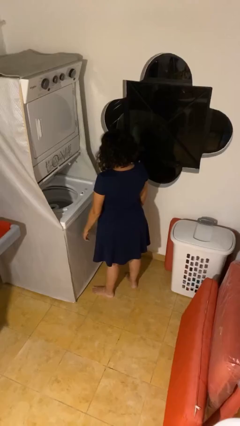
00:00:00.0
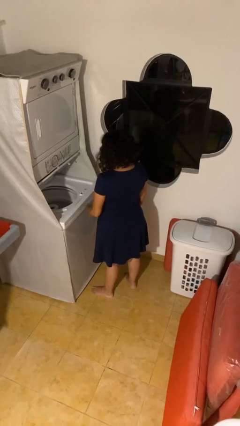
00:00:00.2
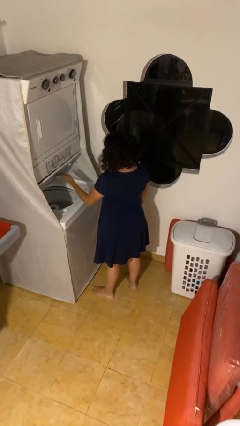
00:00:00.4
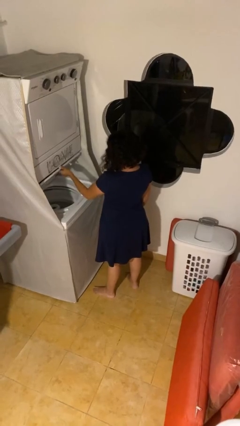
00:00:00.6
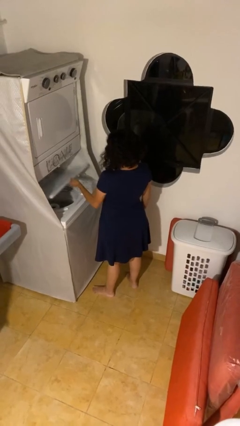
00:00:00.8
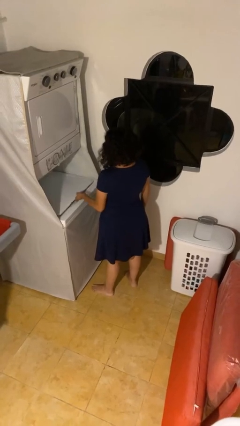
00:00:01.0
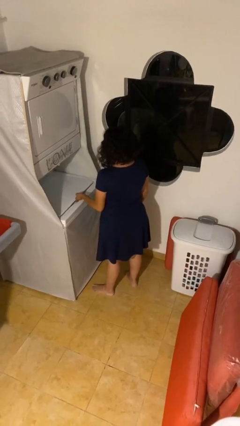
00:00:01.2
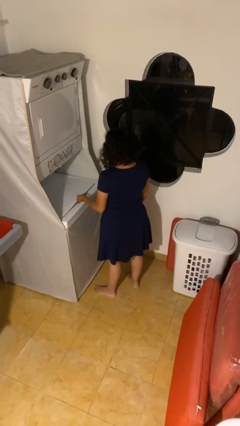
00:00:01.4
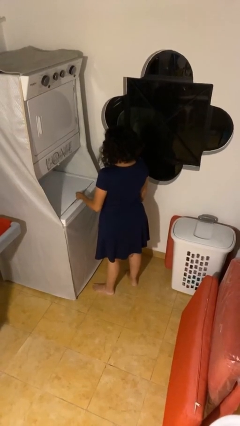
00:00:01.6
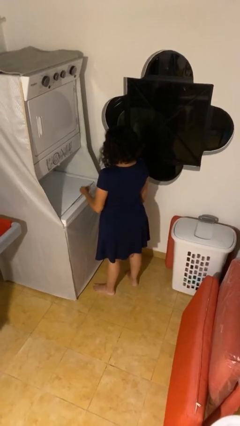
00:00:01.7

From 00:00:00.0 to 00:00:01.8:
person closes clothes washer

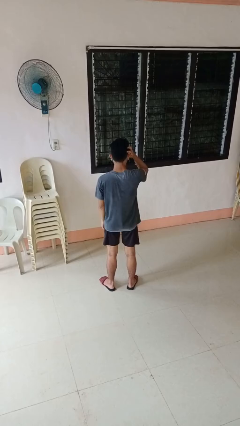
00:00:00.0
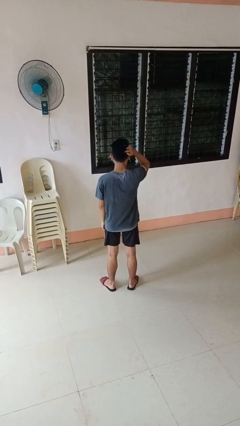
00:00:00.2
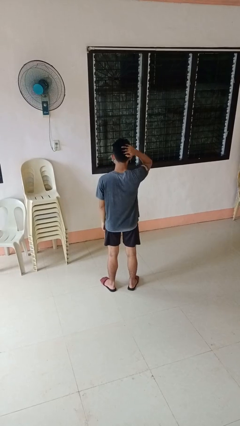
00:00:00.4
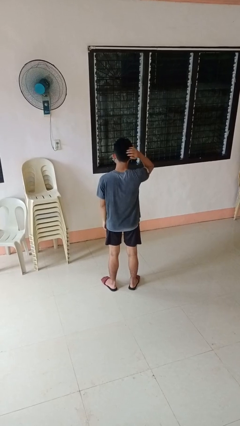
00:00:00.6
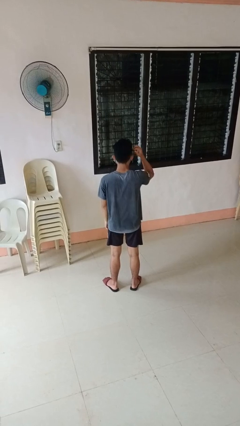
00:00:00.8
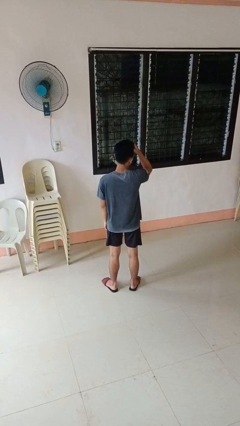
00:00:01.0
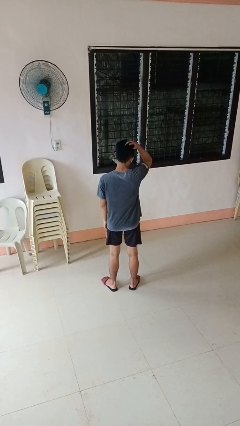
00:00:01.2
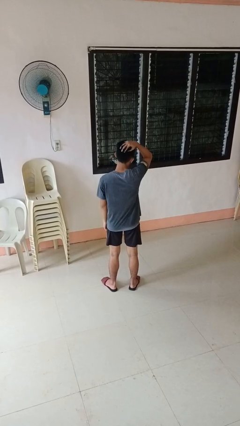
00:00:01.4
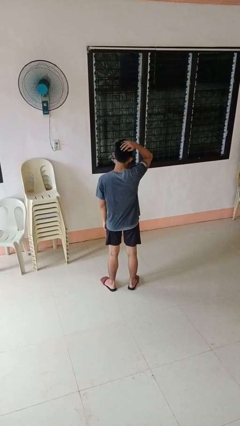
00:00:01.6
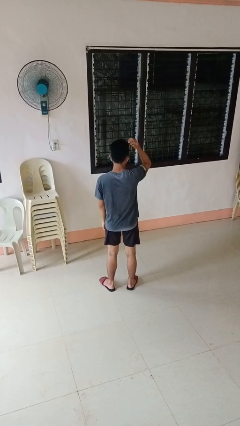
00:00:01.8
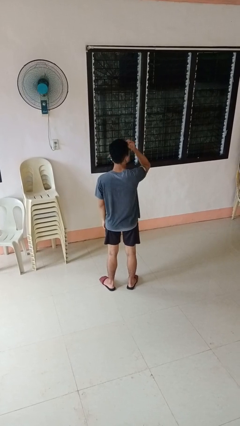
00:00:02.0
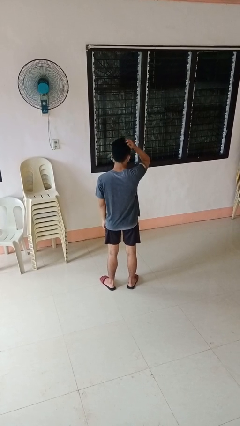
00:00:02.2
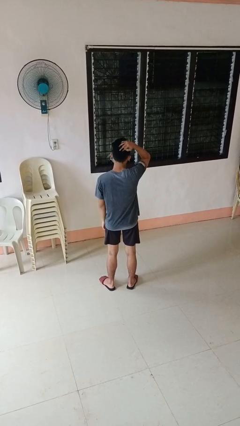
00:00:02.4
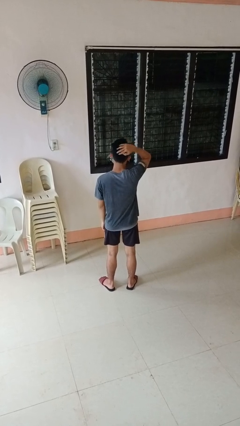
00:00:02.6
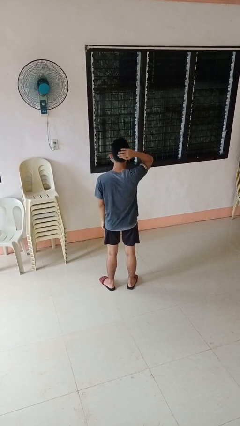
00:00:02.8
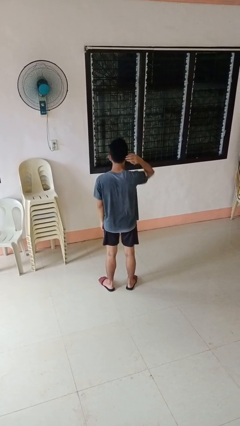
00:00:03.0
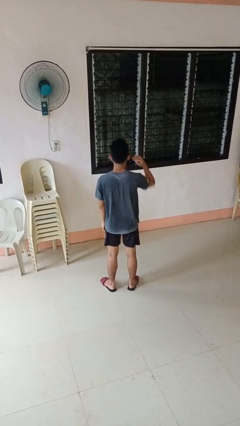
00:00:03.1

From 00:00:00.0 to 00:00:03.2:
person strokes hair

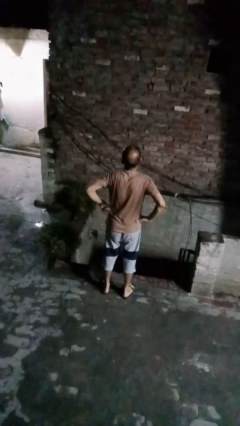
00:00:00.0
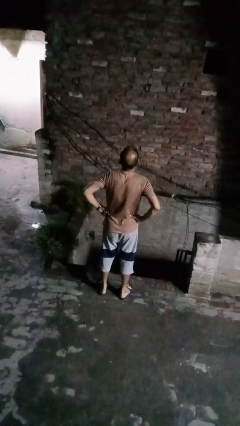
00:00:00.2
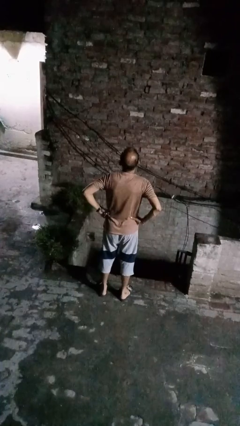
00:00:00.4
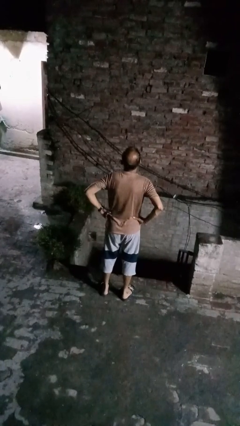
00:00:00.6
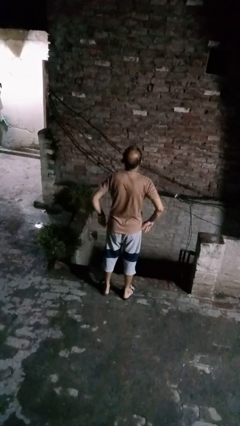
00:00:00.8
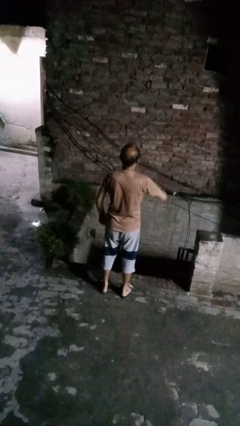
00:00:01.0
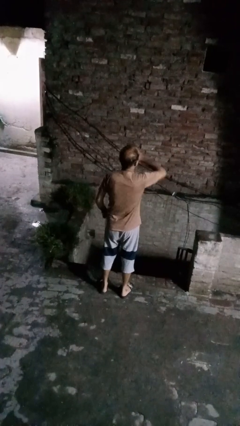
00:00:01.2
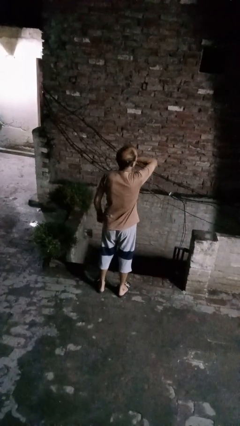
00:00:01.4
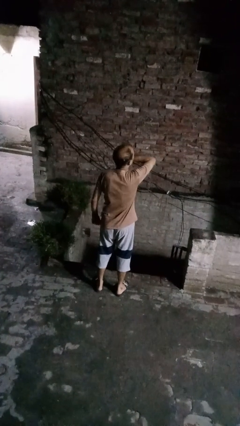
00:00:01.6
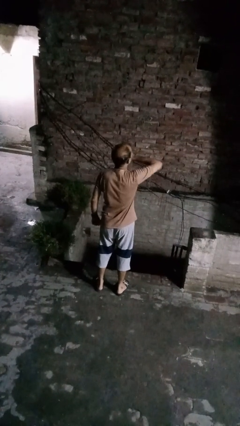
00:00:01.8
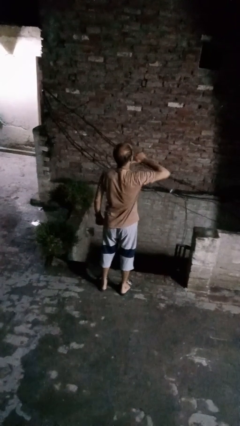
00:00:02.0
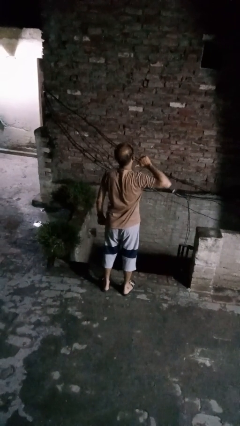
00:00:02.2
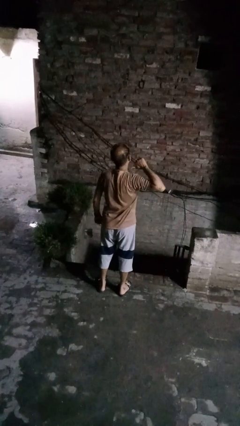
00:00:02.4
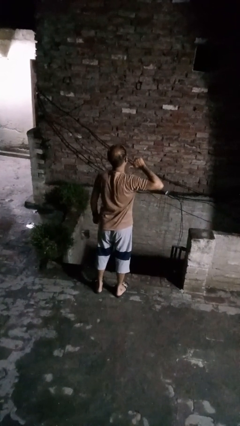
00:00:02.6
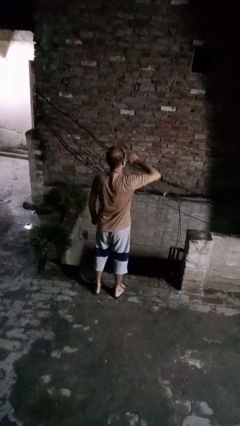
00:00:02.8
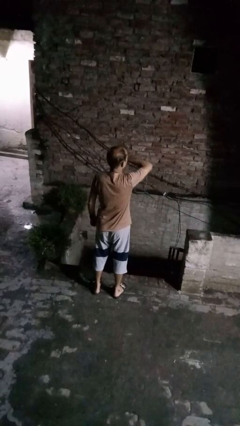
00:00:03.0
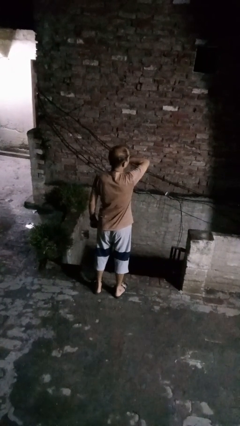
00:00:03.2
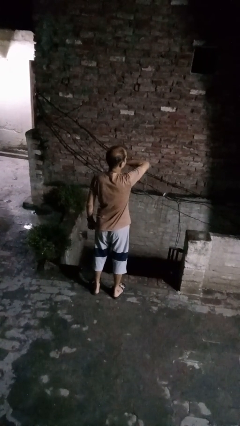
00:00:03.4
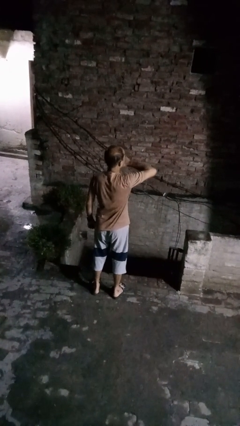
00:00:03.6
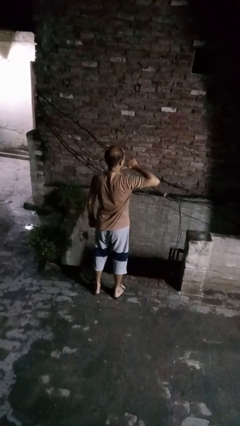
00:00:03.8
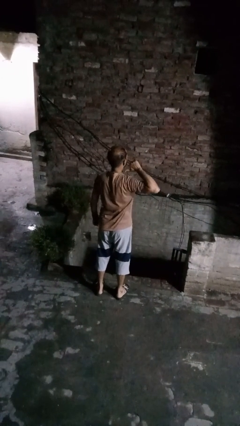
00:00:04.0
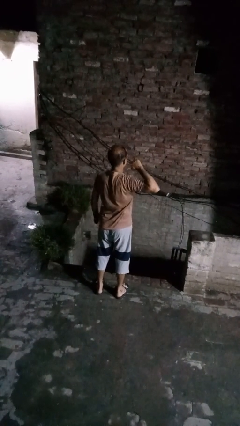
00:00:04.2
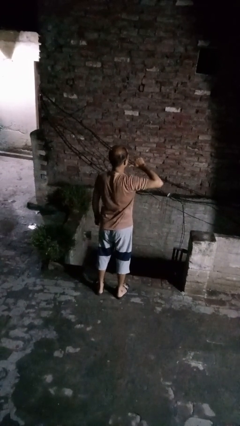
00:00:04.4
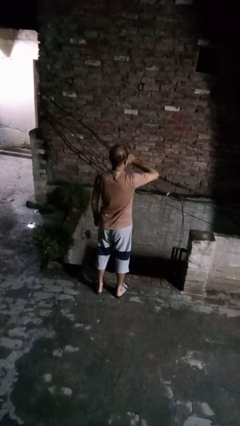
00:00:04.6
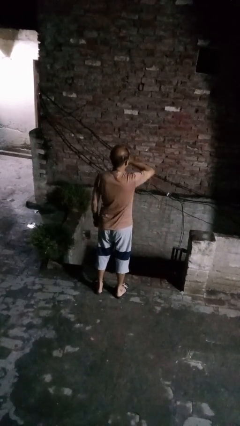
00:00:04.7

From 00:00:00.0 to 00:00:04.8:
person gestures cut

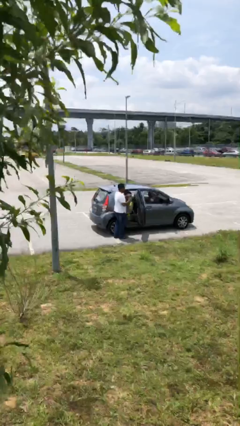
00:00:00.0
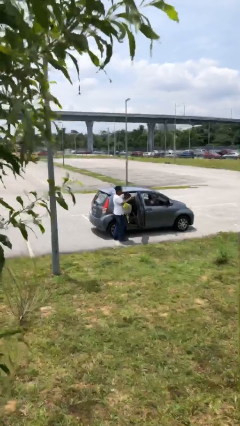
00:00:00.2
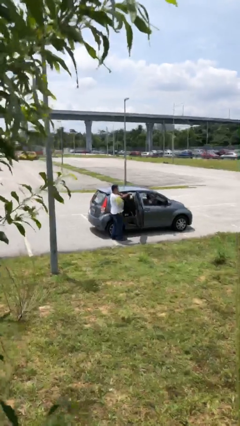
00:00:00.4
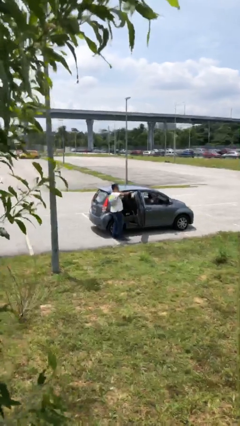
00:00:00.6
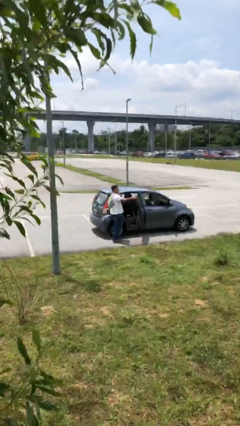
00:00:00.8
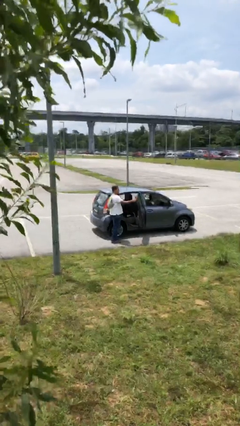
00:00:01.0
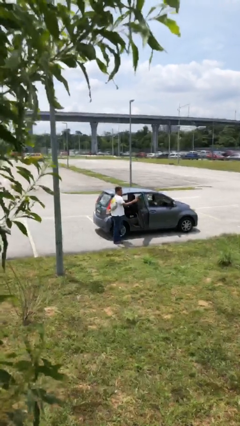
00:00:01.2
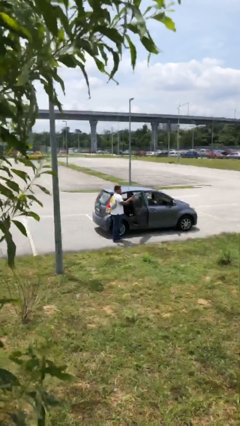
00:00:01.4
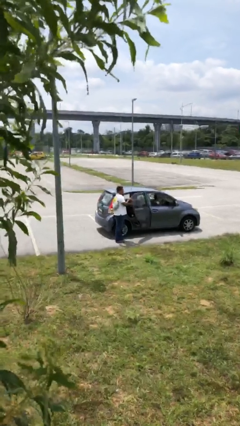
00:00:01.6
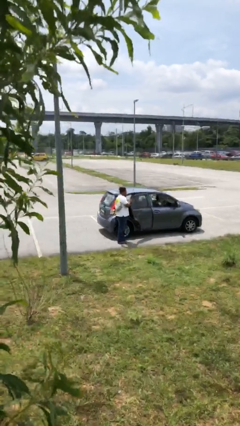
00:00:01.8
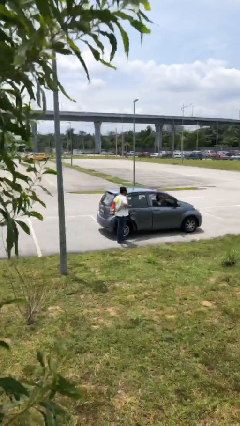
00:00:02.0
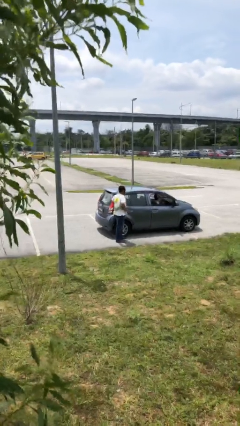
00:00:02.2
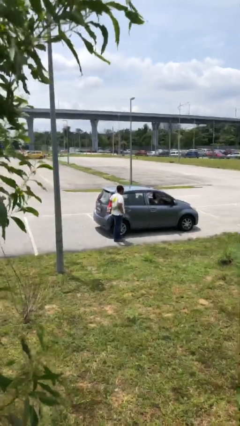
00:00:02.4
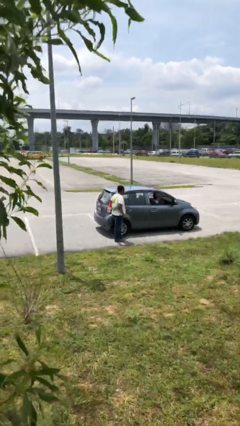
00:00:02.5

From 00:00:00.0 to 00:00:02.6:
person closes car door

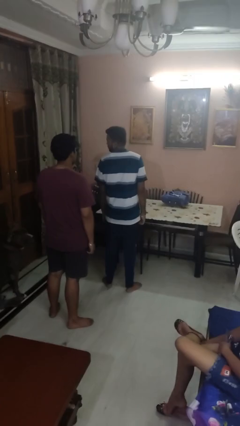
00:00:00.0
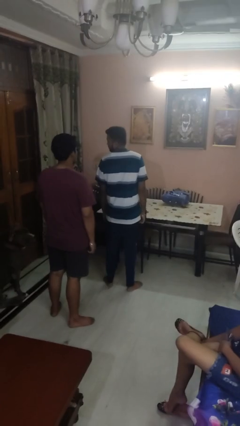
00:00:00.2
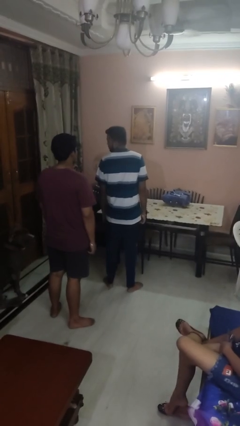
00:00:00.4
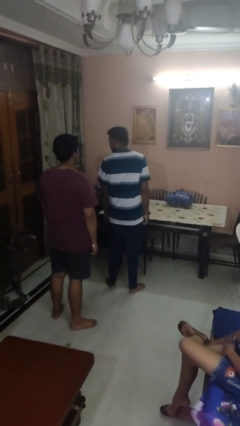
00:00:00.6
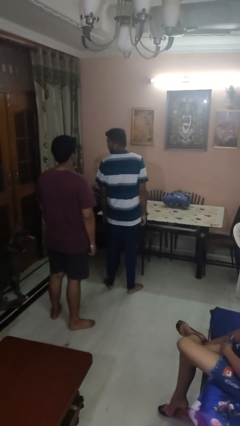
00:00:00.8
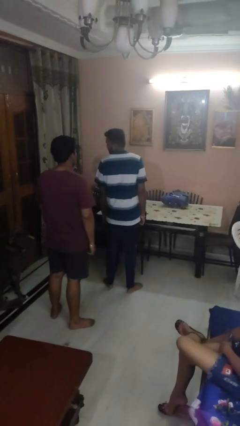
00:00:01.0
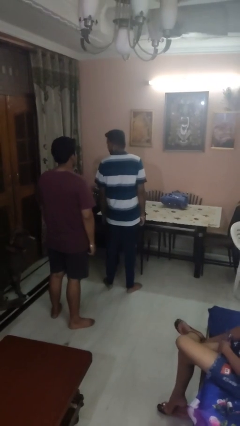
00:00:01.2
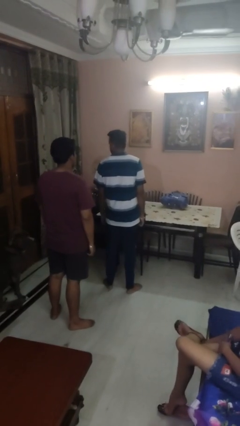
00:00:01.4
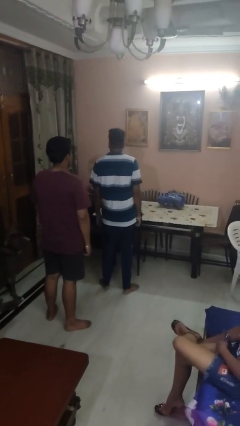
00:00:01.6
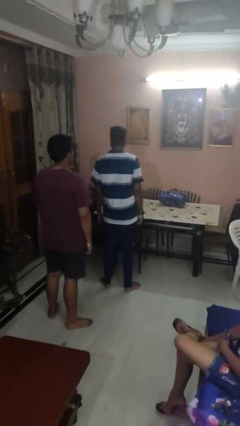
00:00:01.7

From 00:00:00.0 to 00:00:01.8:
person looks over shoulder

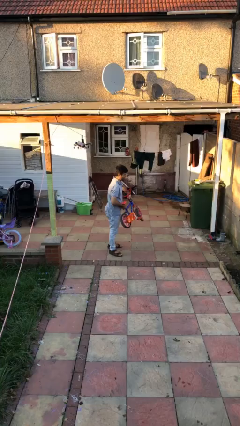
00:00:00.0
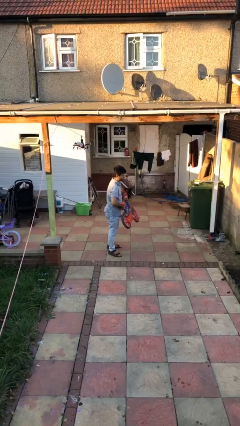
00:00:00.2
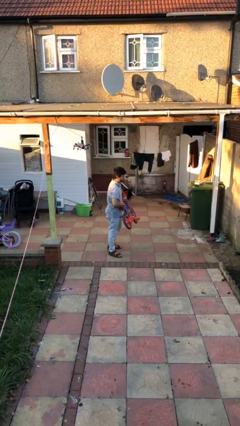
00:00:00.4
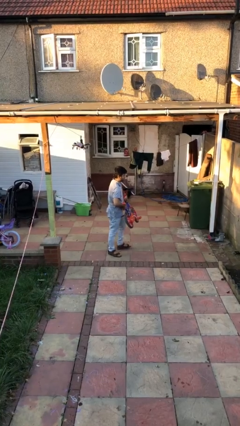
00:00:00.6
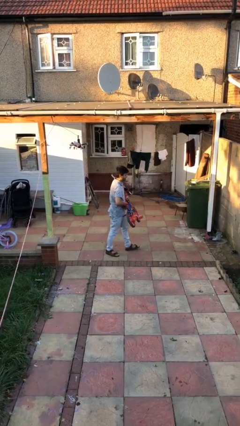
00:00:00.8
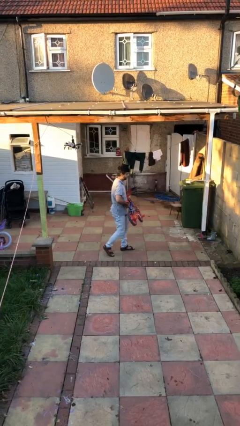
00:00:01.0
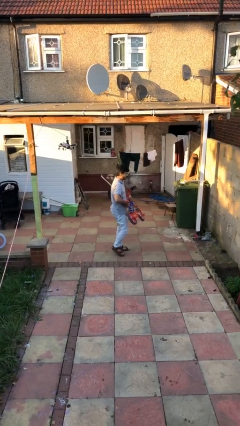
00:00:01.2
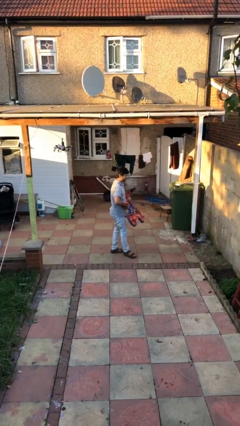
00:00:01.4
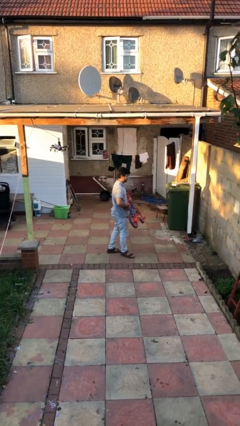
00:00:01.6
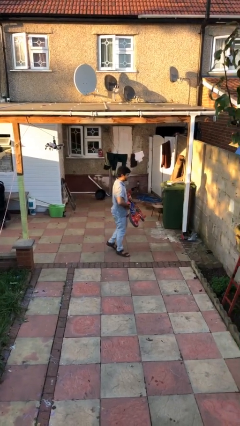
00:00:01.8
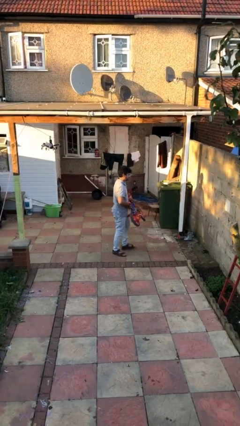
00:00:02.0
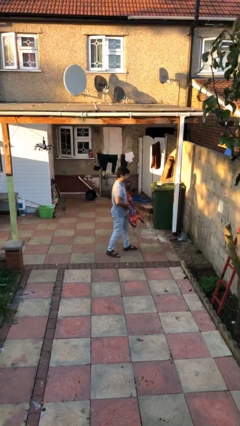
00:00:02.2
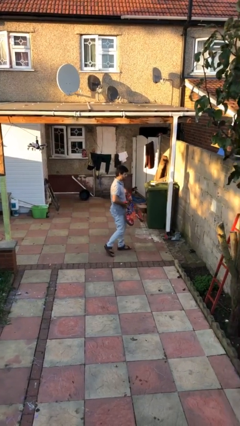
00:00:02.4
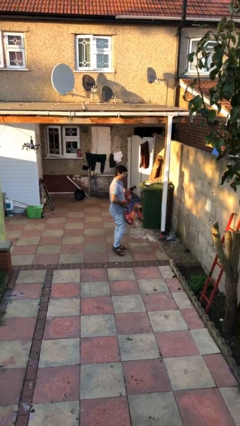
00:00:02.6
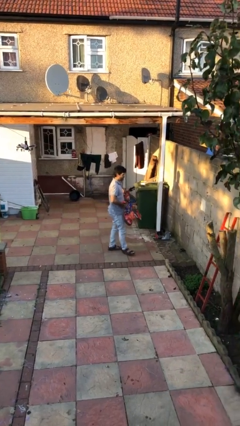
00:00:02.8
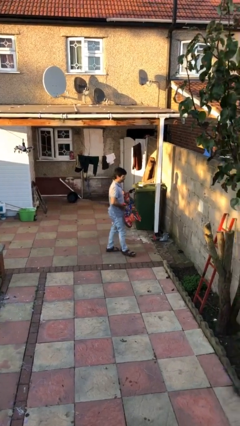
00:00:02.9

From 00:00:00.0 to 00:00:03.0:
person carries heavy object

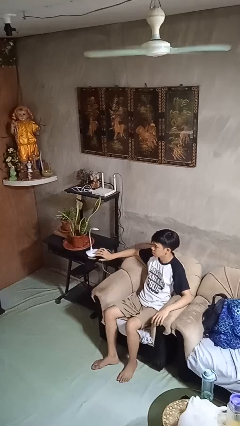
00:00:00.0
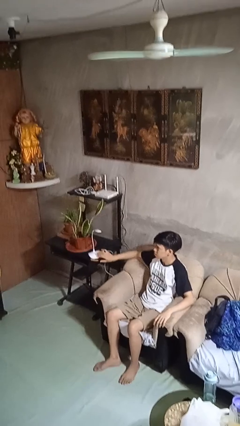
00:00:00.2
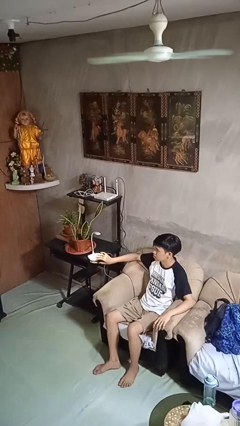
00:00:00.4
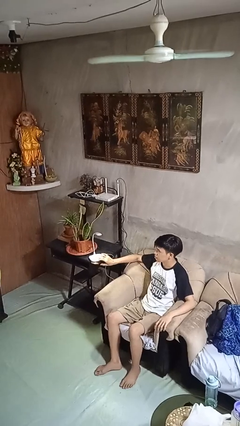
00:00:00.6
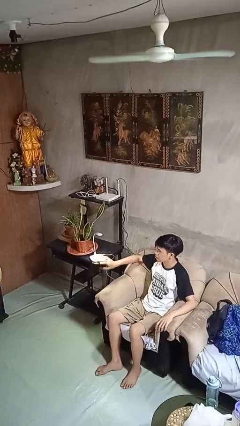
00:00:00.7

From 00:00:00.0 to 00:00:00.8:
person turns on lamp
